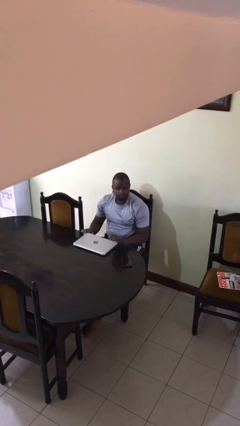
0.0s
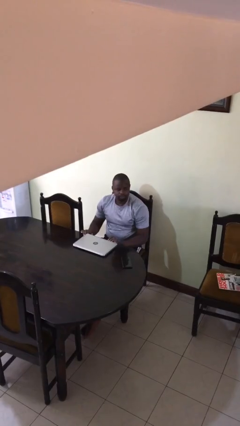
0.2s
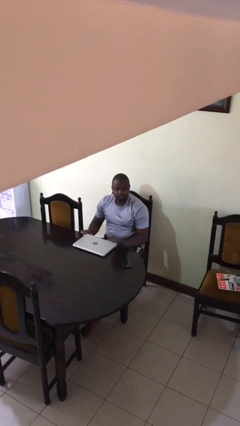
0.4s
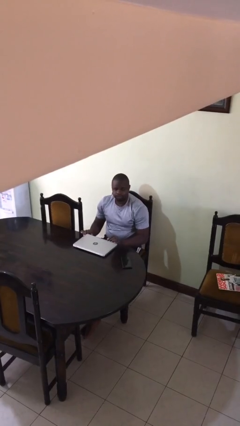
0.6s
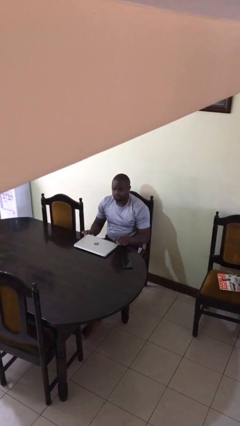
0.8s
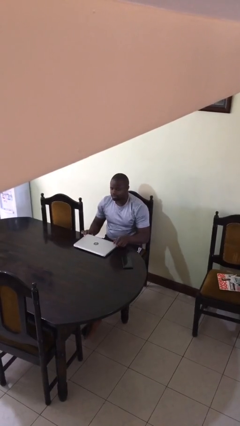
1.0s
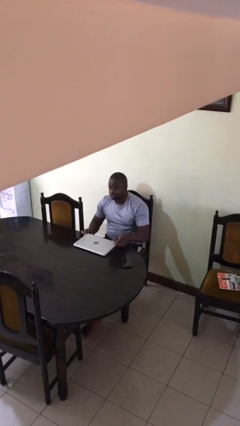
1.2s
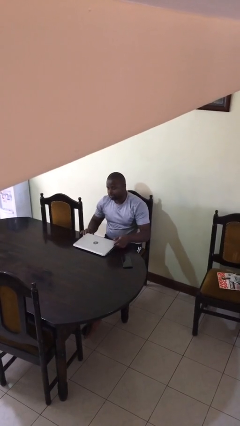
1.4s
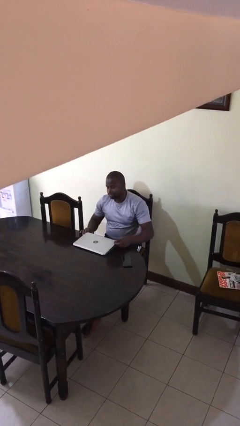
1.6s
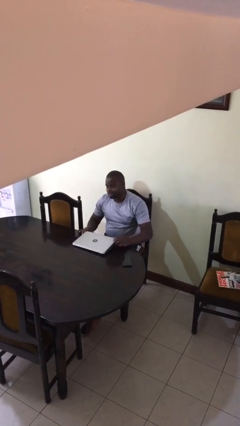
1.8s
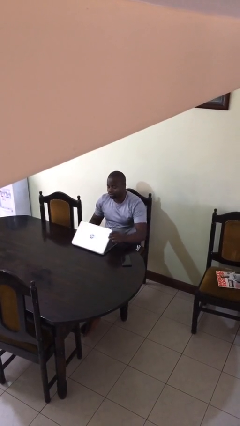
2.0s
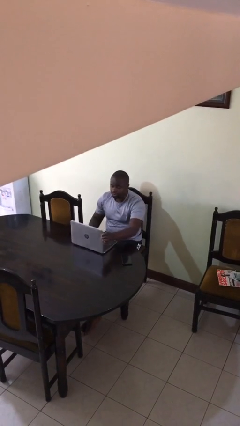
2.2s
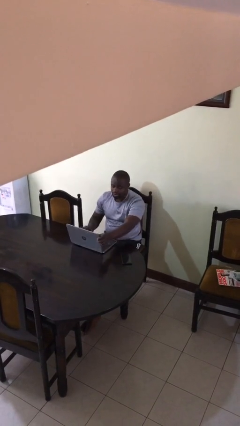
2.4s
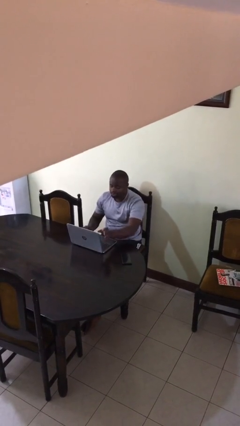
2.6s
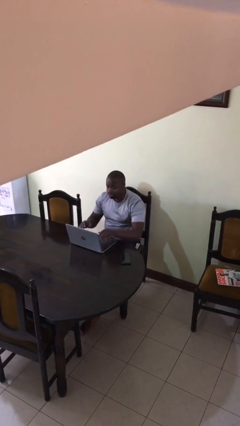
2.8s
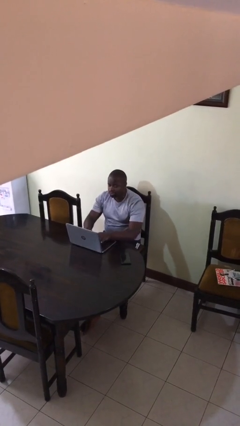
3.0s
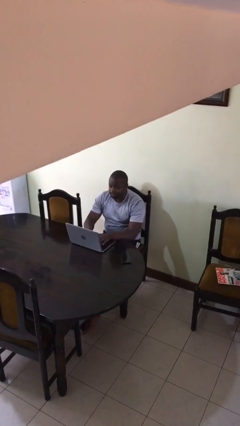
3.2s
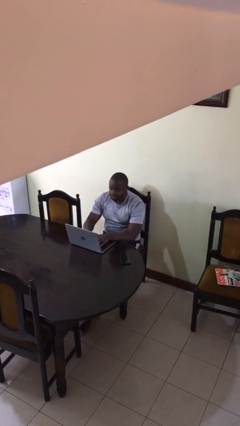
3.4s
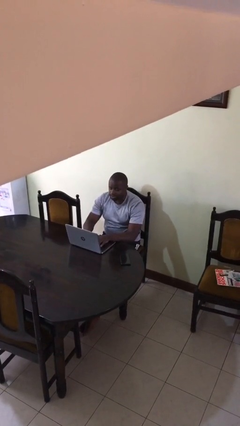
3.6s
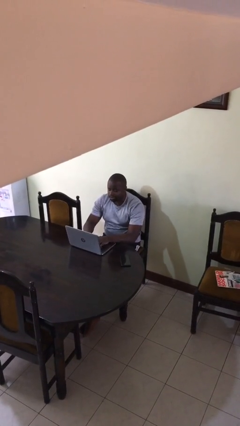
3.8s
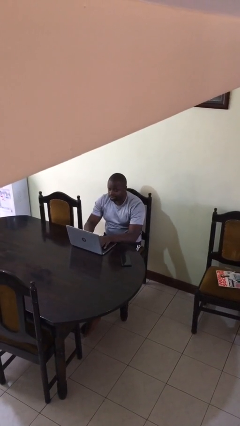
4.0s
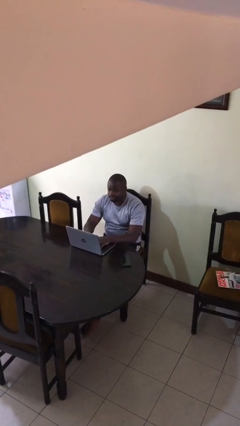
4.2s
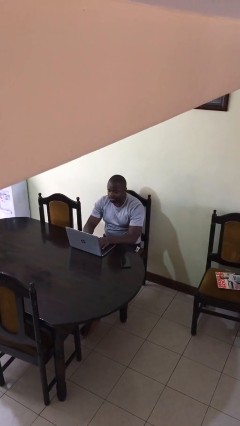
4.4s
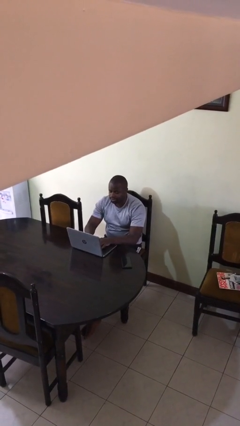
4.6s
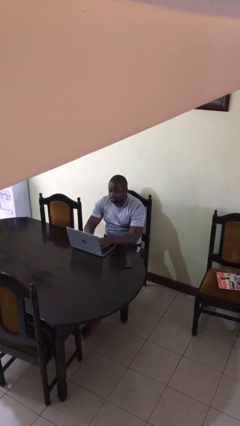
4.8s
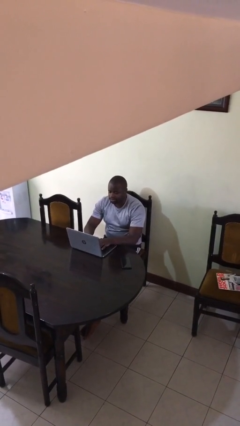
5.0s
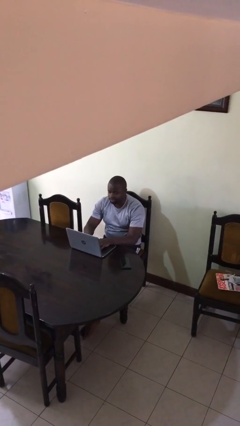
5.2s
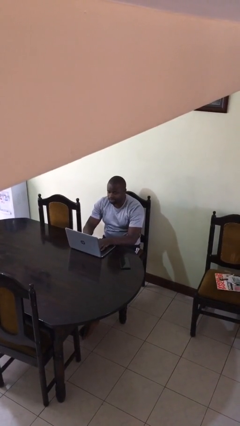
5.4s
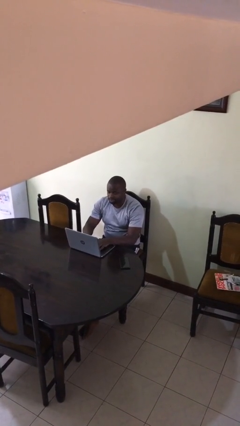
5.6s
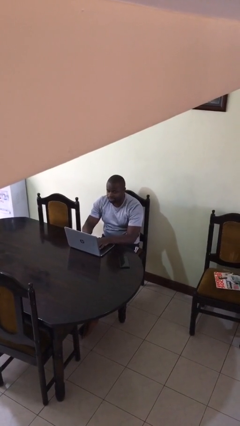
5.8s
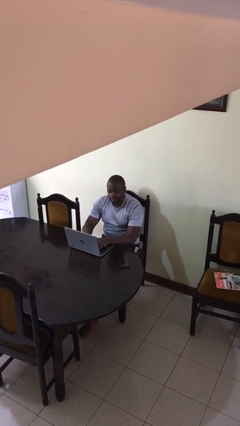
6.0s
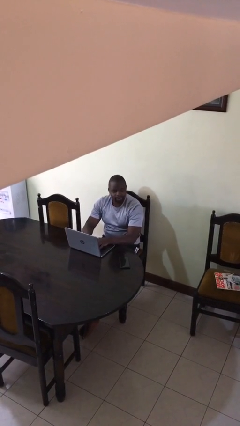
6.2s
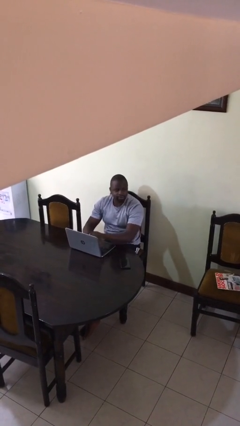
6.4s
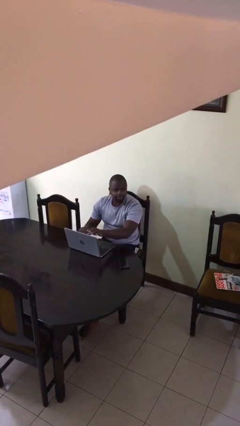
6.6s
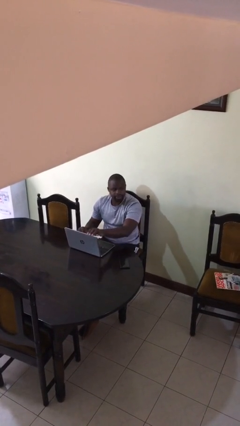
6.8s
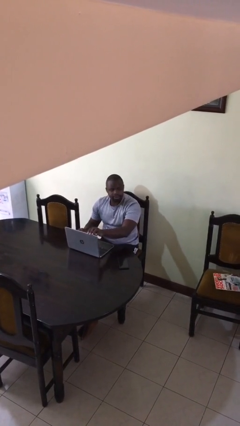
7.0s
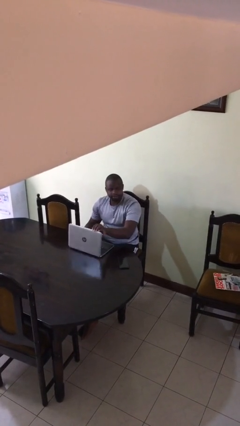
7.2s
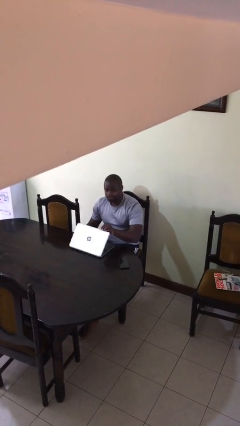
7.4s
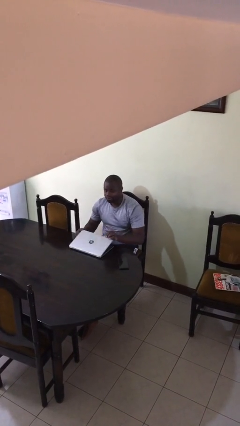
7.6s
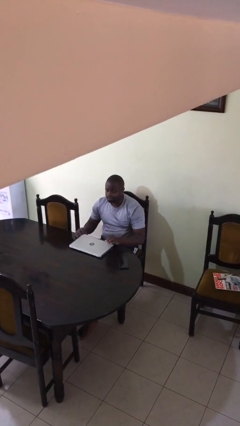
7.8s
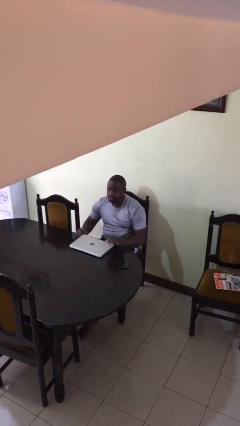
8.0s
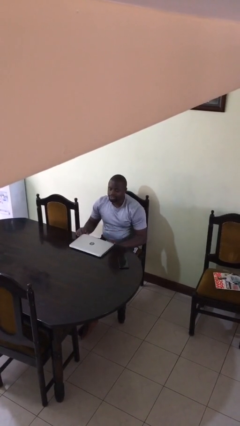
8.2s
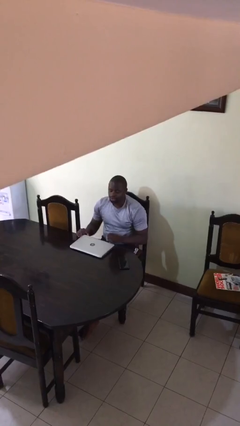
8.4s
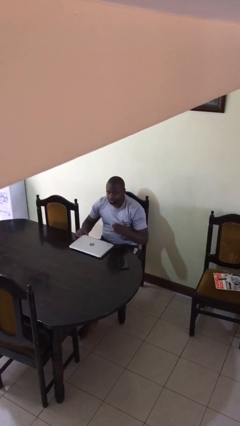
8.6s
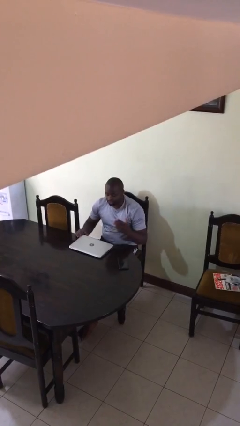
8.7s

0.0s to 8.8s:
person interacts with laptop

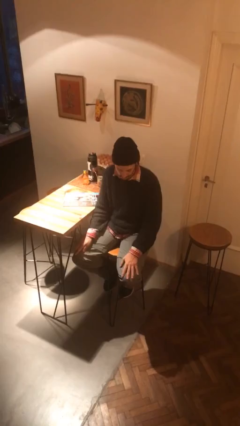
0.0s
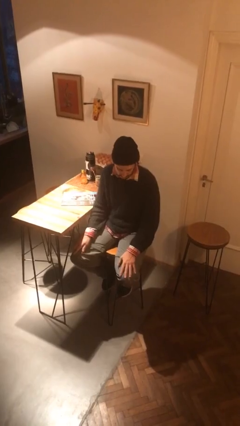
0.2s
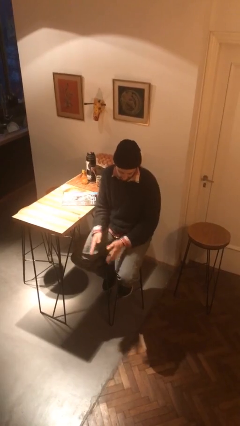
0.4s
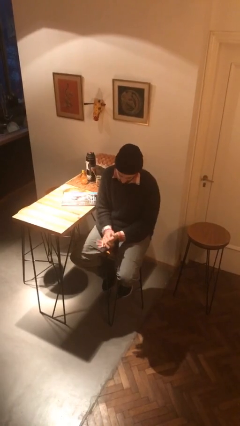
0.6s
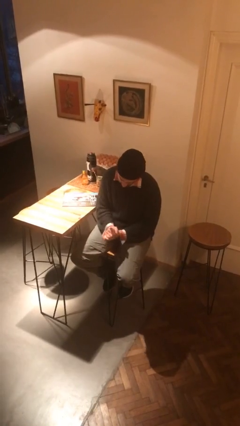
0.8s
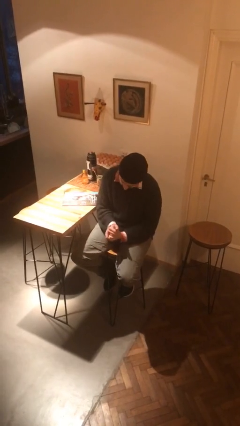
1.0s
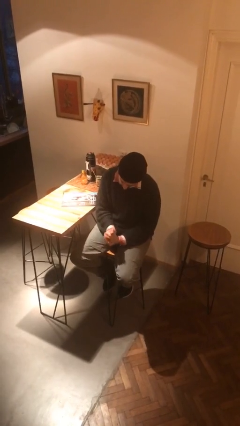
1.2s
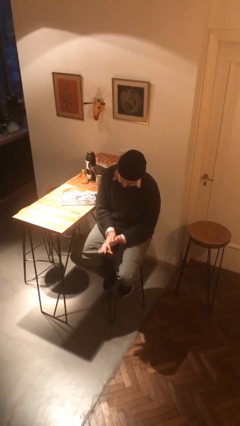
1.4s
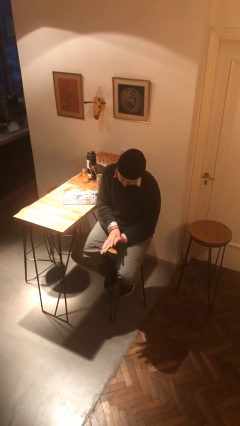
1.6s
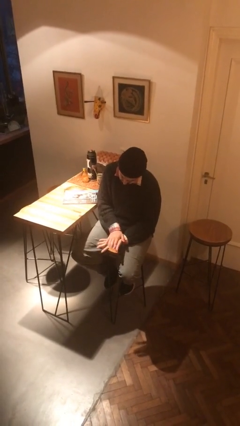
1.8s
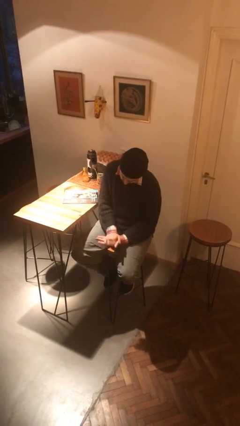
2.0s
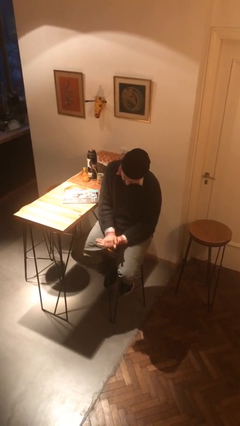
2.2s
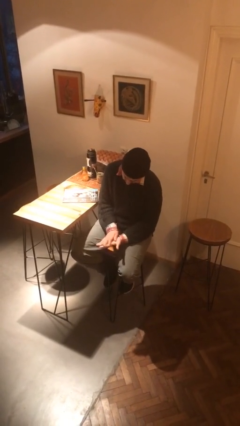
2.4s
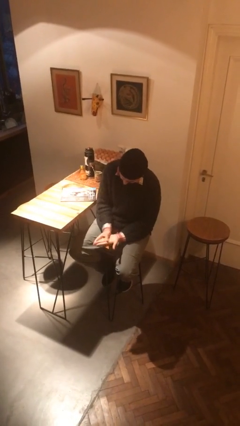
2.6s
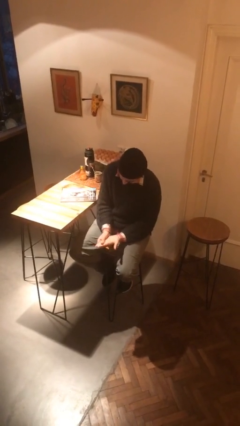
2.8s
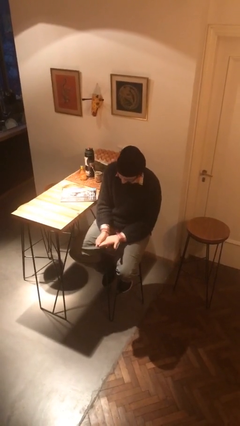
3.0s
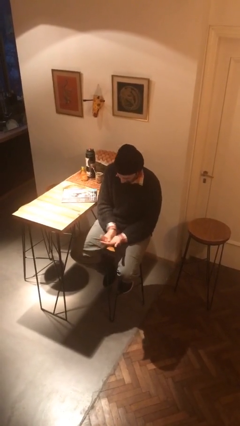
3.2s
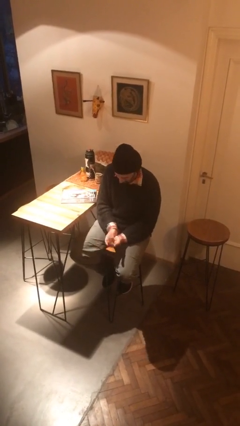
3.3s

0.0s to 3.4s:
person looks at hands in lap

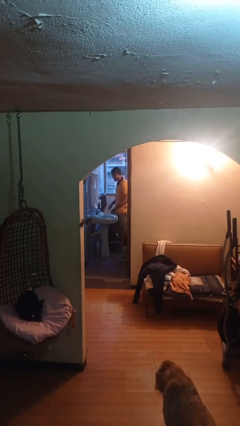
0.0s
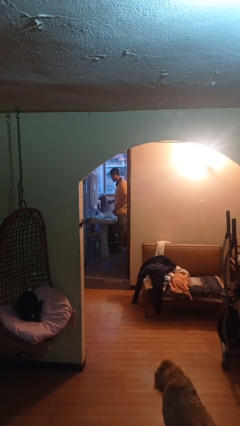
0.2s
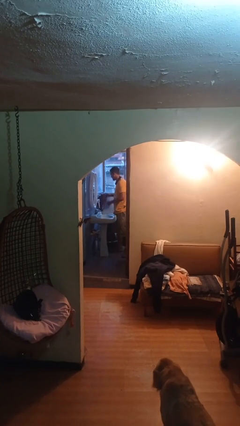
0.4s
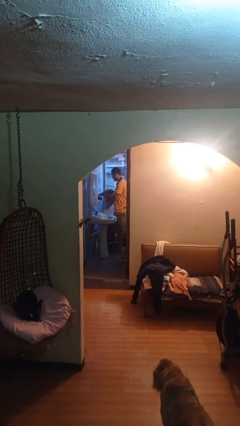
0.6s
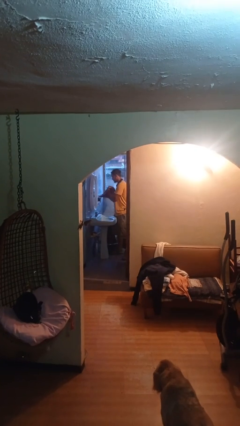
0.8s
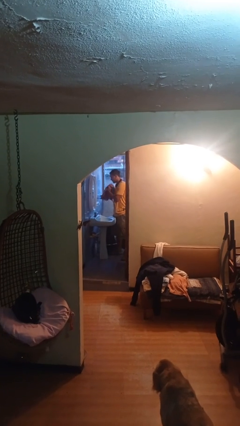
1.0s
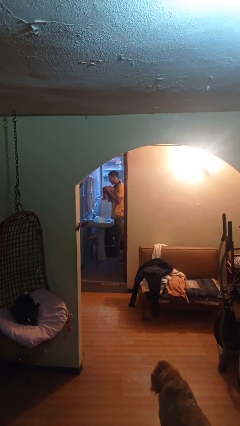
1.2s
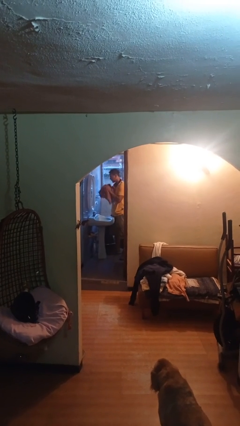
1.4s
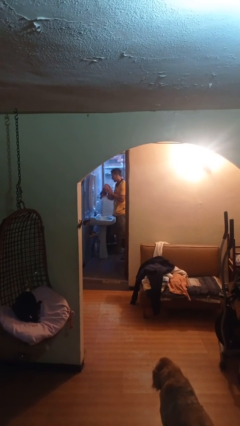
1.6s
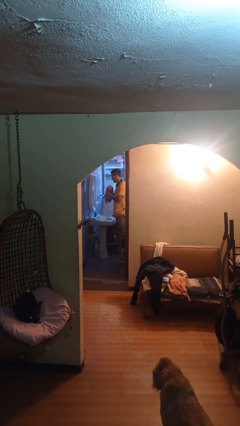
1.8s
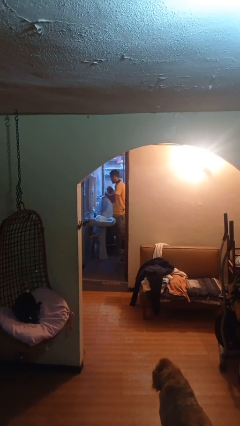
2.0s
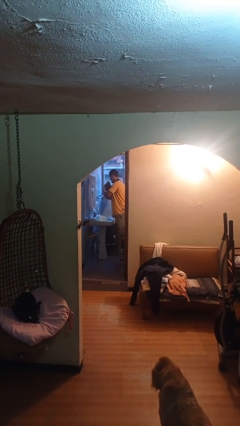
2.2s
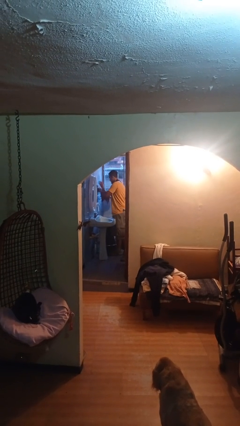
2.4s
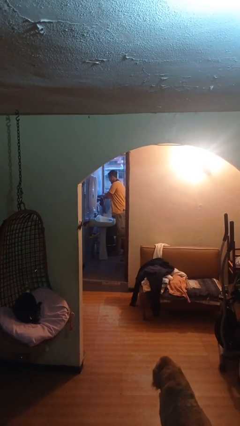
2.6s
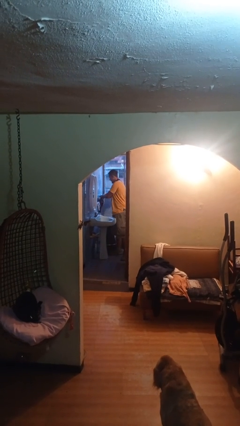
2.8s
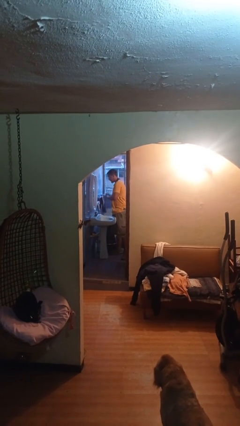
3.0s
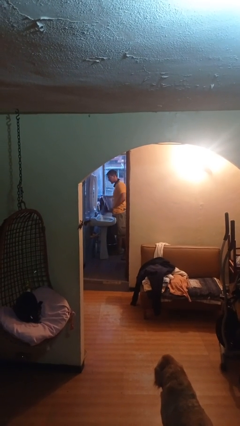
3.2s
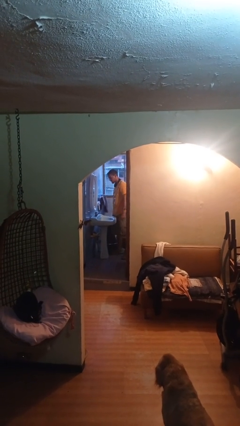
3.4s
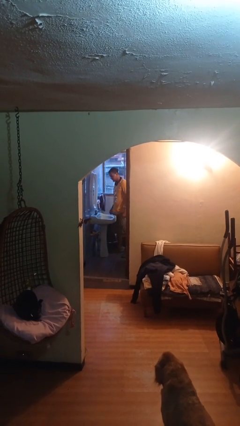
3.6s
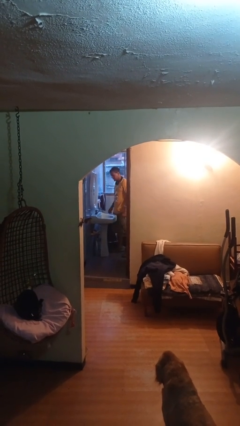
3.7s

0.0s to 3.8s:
person dries hands with towel

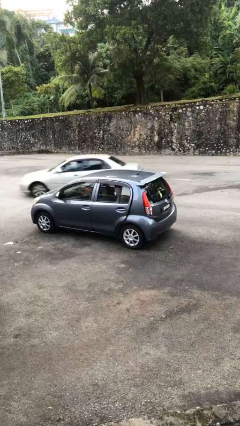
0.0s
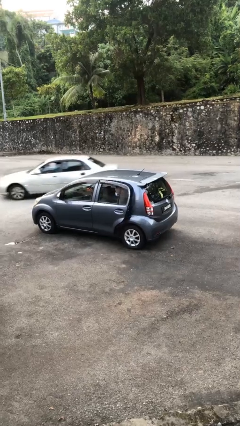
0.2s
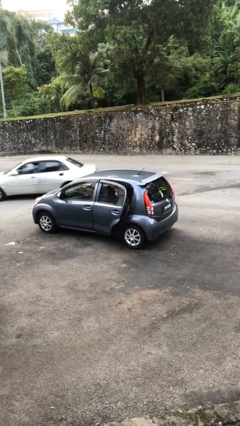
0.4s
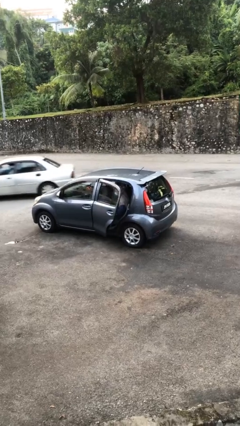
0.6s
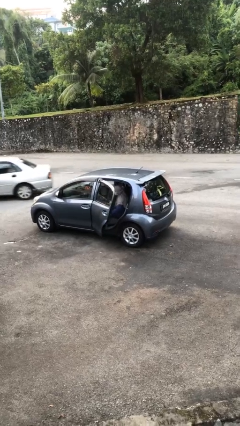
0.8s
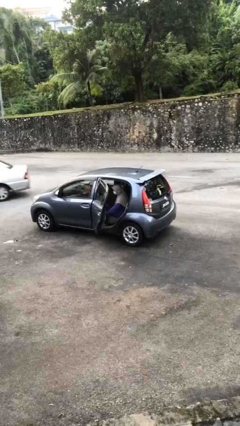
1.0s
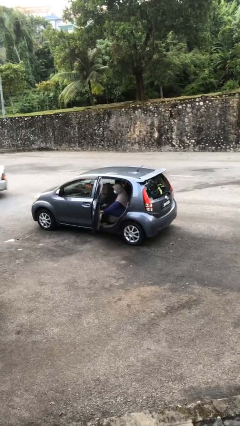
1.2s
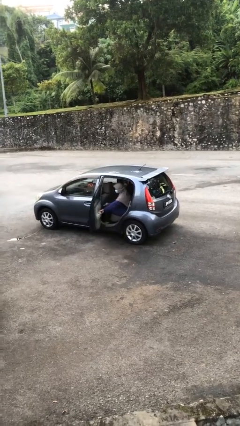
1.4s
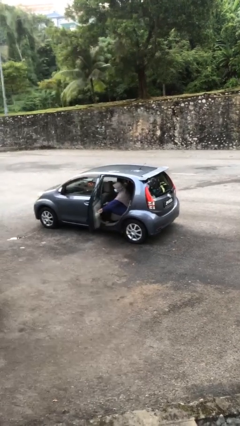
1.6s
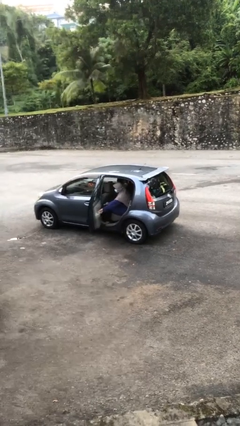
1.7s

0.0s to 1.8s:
person opens car door

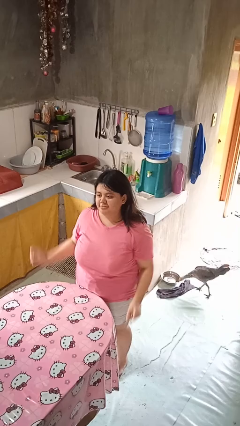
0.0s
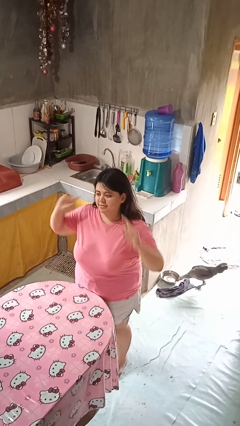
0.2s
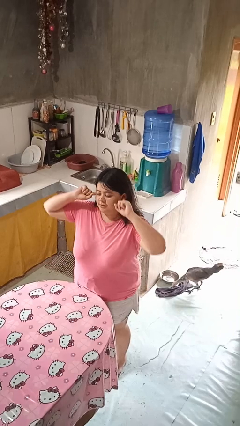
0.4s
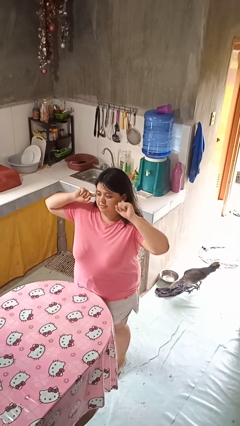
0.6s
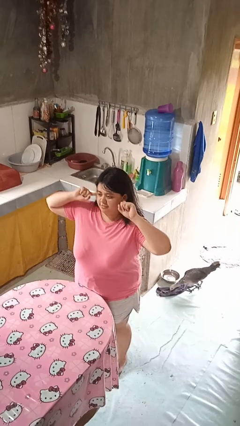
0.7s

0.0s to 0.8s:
person puts fingers in ear
